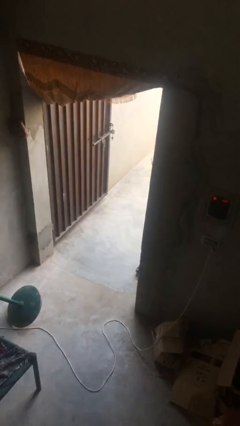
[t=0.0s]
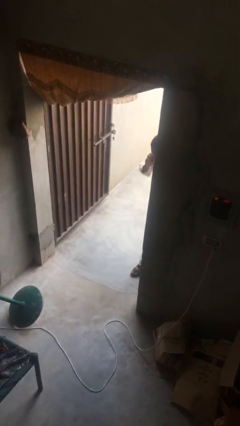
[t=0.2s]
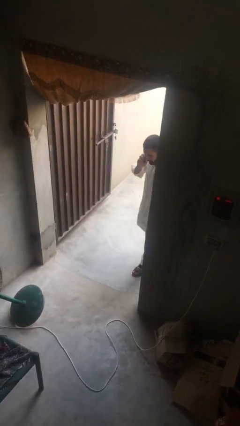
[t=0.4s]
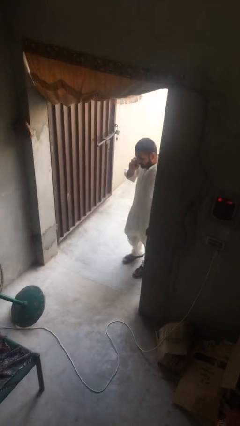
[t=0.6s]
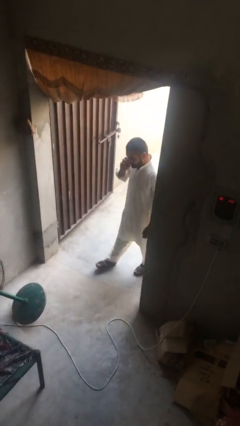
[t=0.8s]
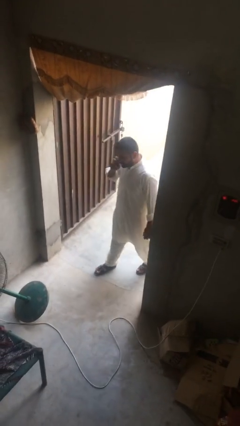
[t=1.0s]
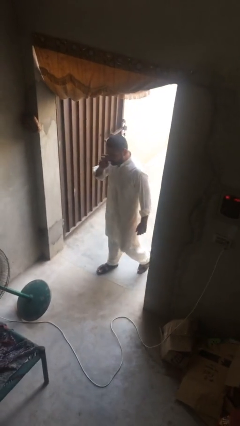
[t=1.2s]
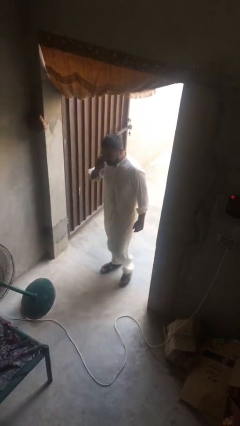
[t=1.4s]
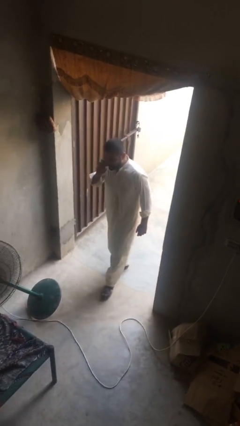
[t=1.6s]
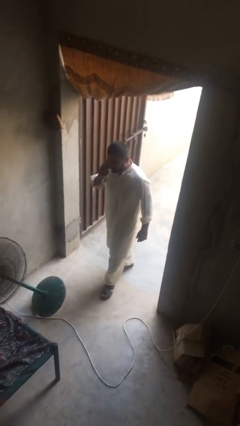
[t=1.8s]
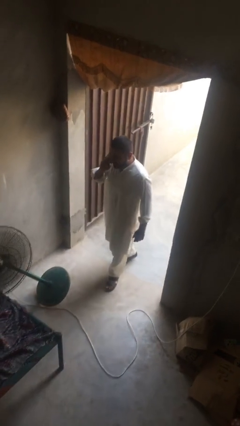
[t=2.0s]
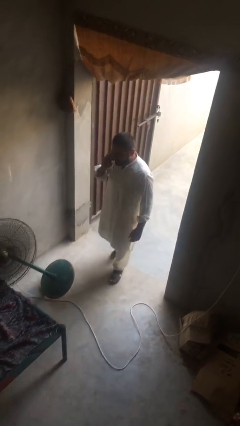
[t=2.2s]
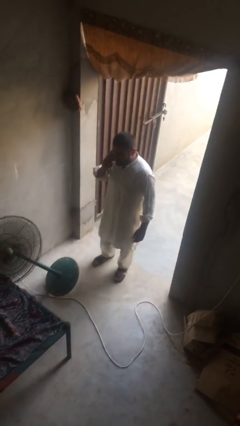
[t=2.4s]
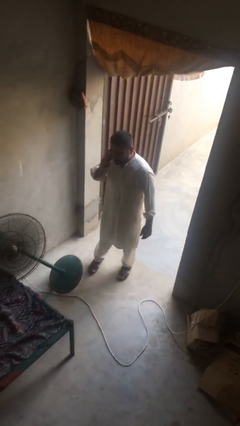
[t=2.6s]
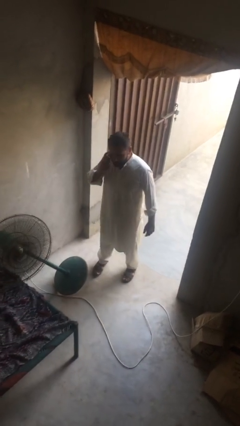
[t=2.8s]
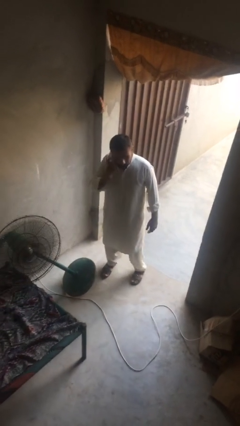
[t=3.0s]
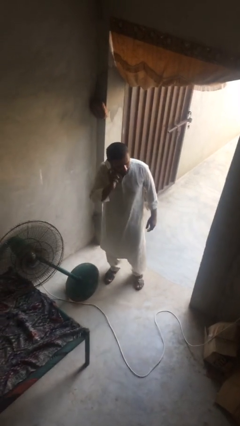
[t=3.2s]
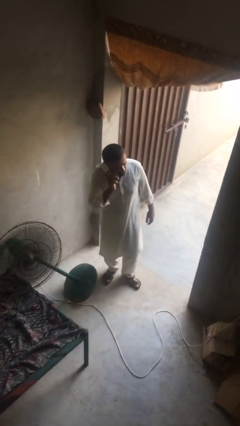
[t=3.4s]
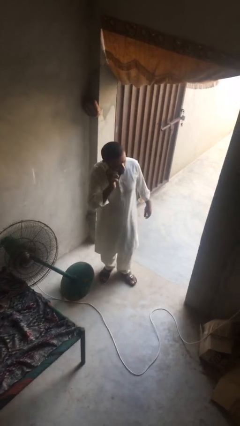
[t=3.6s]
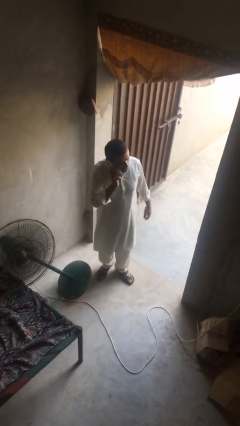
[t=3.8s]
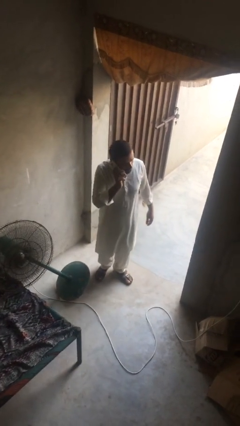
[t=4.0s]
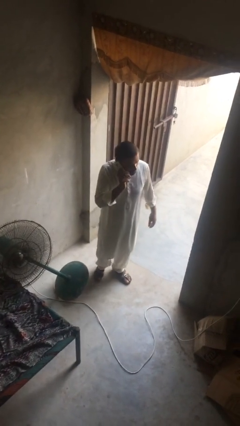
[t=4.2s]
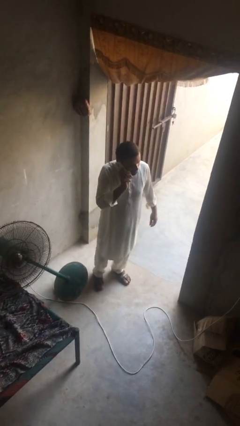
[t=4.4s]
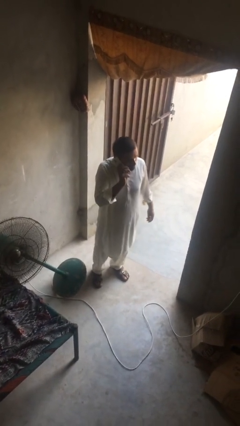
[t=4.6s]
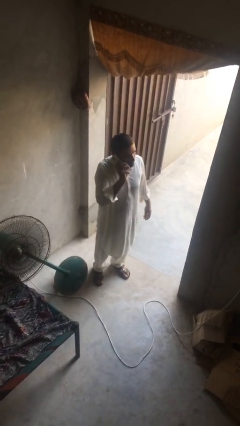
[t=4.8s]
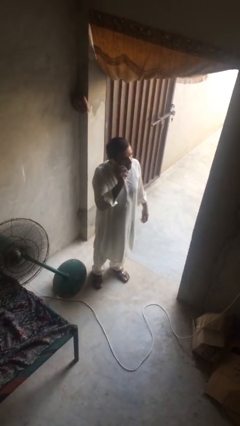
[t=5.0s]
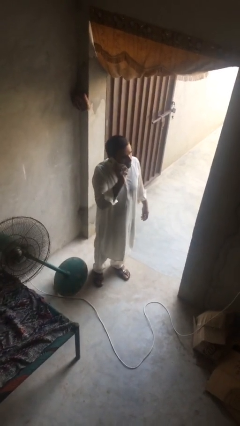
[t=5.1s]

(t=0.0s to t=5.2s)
person enters scene through structure

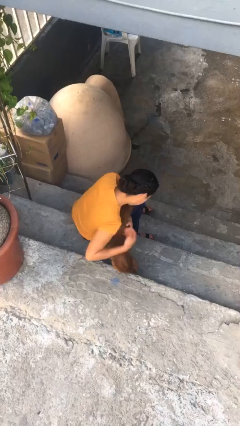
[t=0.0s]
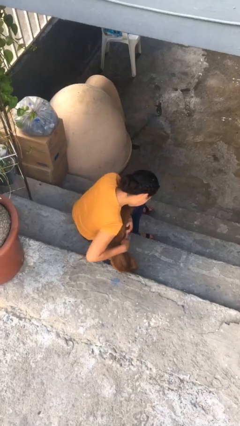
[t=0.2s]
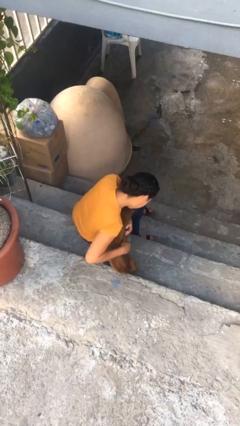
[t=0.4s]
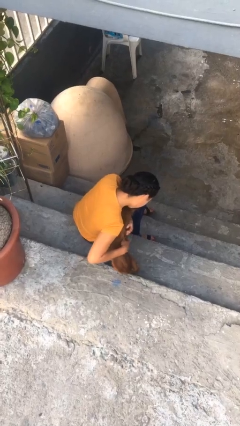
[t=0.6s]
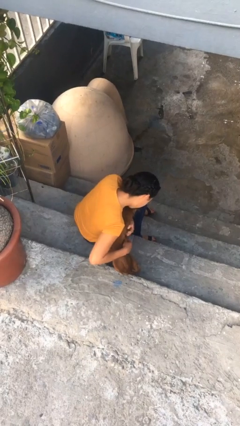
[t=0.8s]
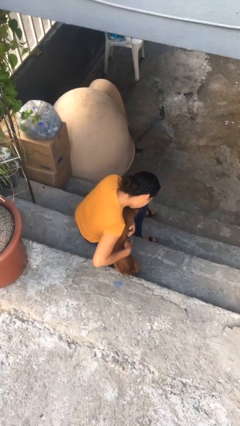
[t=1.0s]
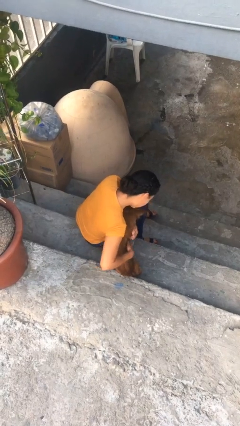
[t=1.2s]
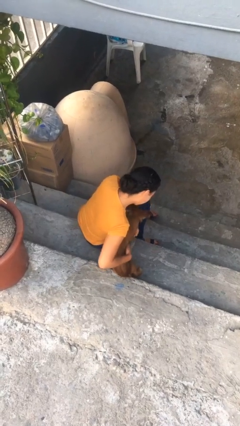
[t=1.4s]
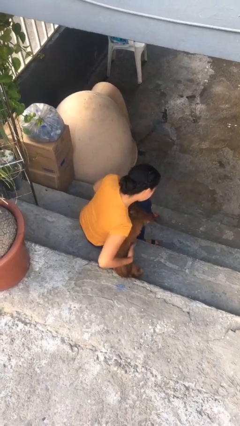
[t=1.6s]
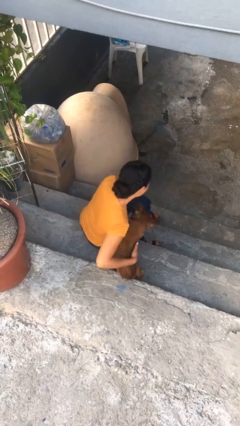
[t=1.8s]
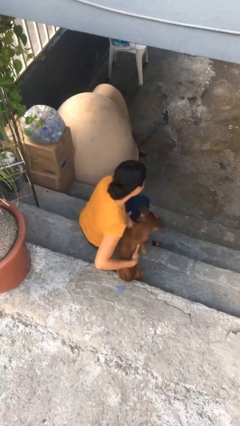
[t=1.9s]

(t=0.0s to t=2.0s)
person hugs dog

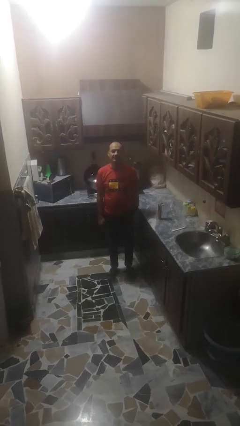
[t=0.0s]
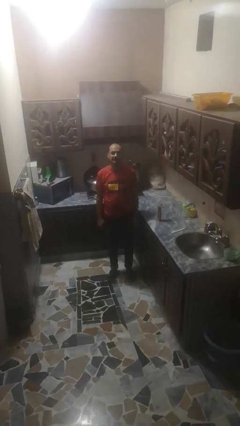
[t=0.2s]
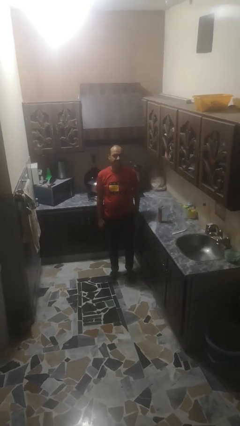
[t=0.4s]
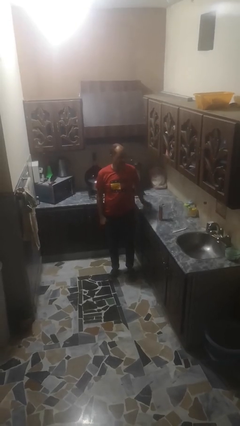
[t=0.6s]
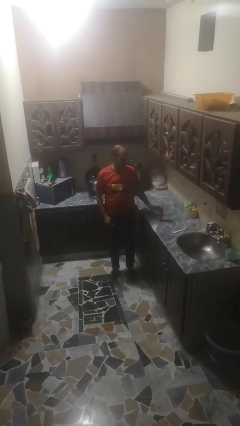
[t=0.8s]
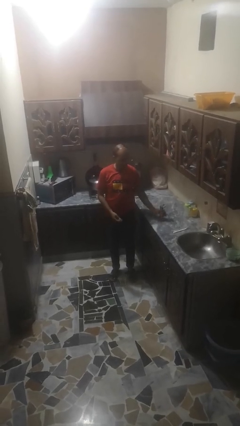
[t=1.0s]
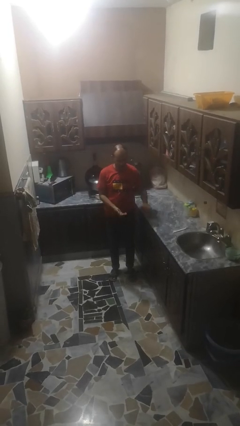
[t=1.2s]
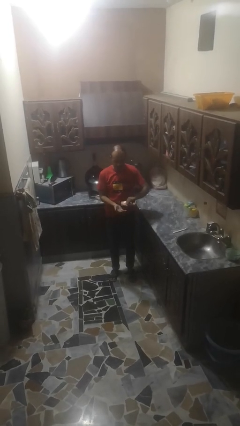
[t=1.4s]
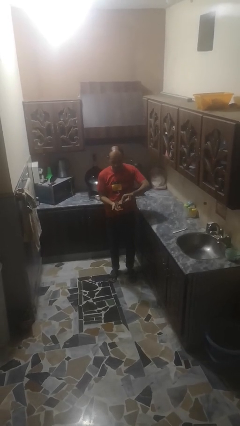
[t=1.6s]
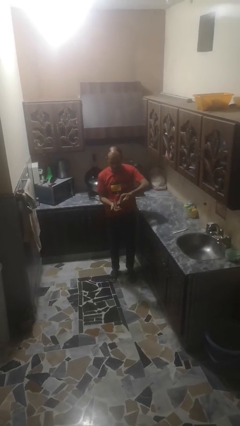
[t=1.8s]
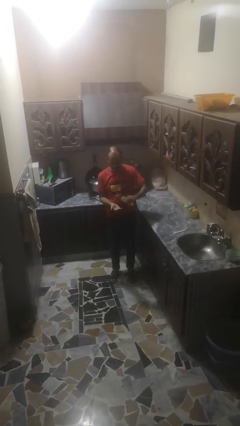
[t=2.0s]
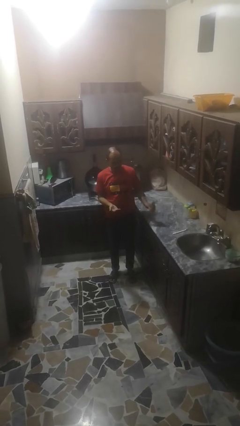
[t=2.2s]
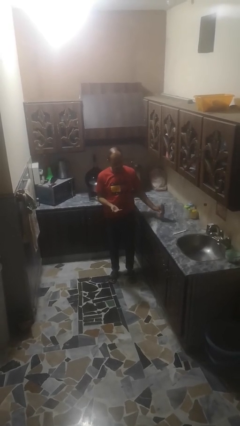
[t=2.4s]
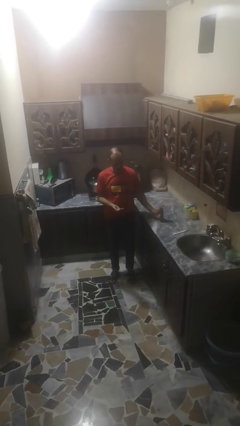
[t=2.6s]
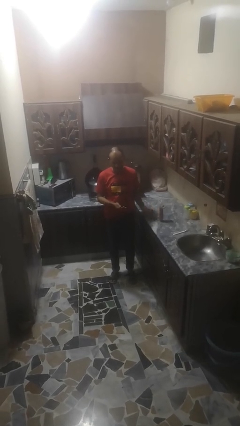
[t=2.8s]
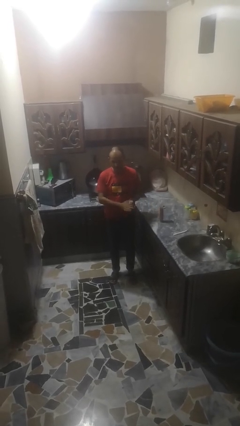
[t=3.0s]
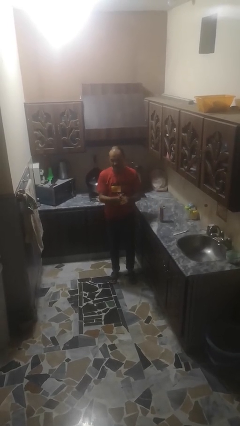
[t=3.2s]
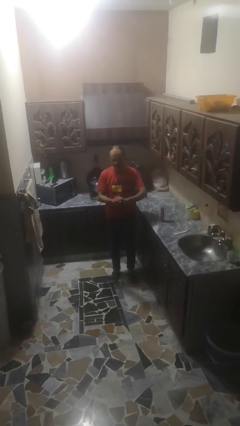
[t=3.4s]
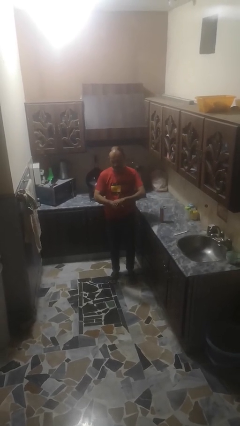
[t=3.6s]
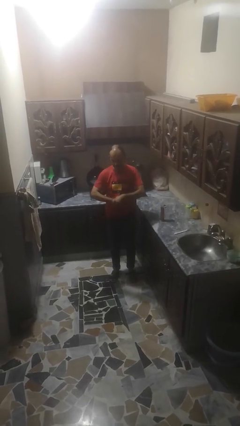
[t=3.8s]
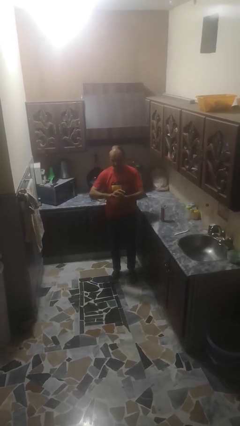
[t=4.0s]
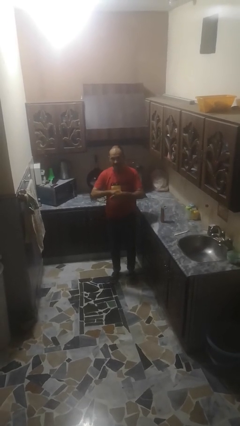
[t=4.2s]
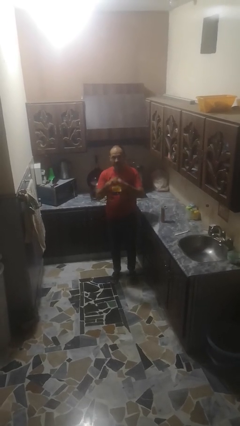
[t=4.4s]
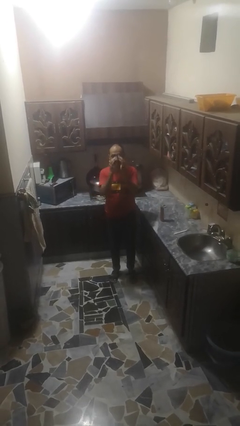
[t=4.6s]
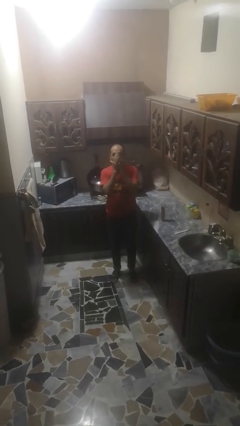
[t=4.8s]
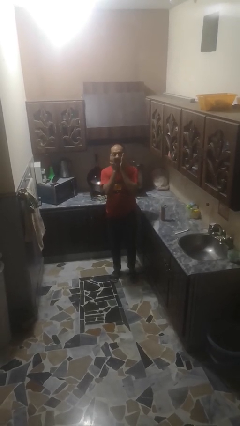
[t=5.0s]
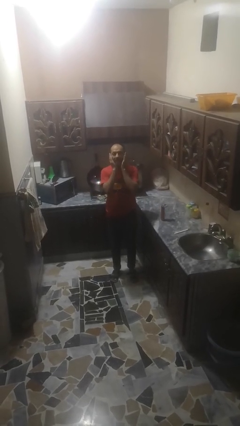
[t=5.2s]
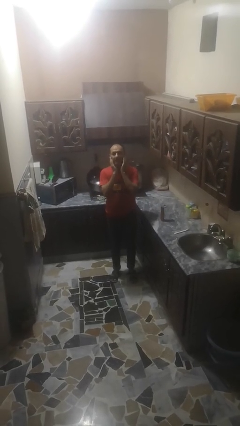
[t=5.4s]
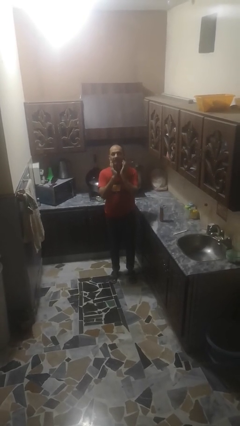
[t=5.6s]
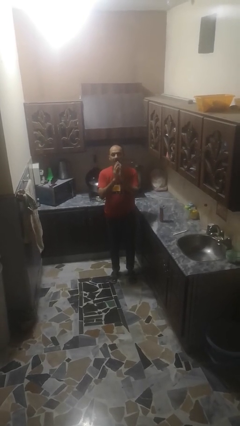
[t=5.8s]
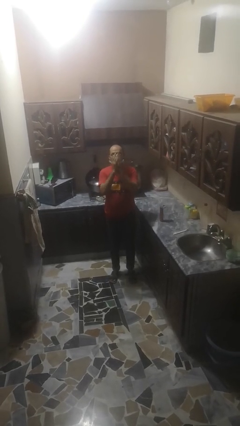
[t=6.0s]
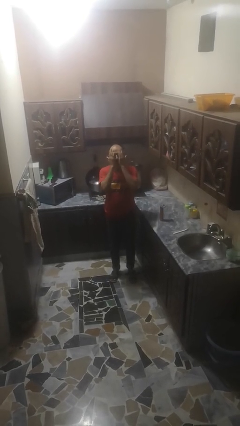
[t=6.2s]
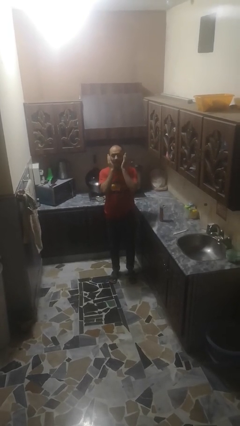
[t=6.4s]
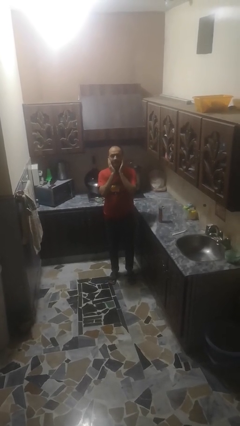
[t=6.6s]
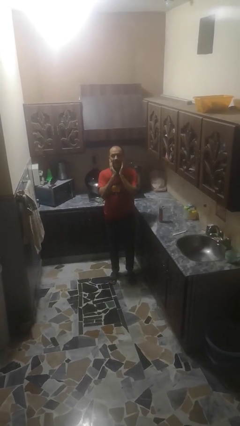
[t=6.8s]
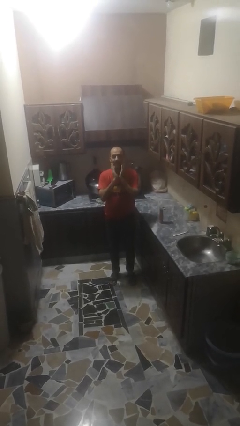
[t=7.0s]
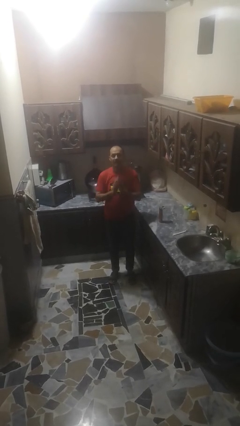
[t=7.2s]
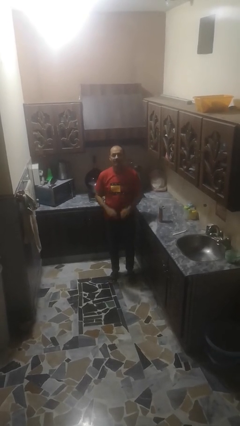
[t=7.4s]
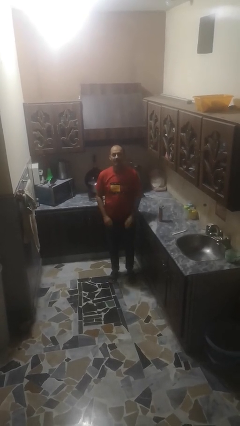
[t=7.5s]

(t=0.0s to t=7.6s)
person applies sunscreen

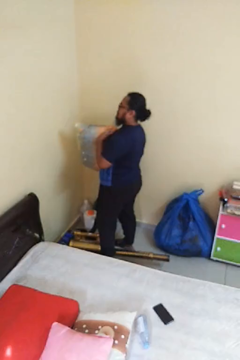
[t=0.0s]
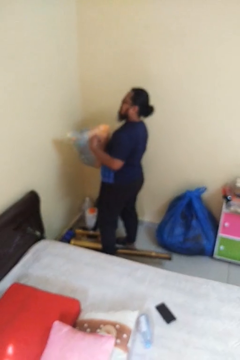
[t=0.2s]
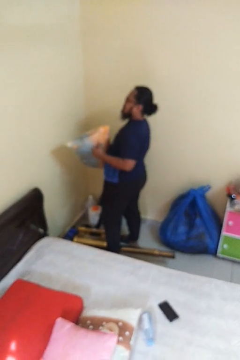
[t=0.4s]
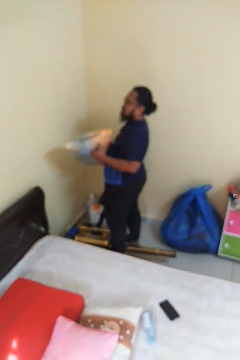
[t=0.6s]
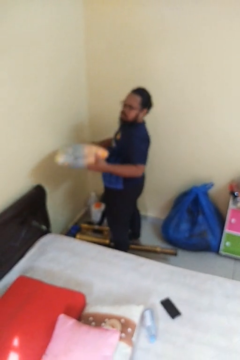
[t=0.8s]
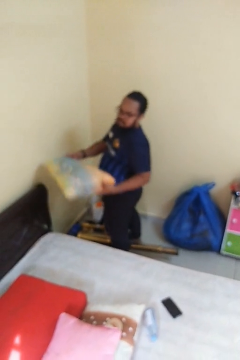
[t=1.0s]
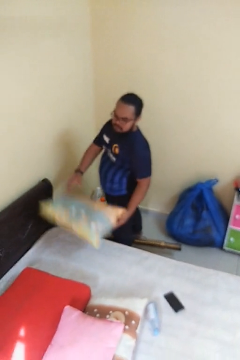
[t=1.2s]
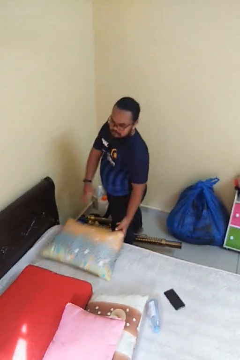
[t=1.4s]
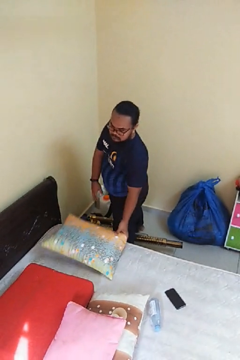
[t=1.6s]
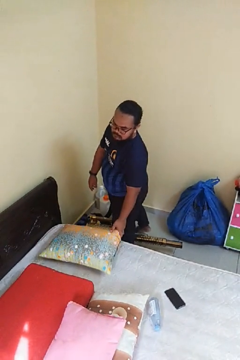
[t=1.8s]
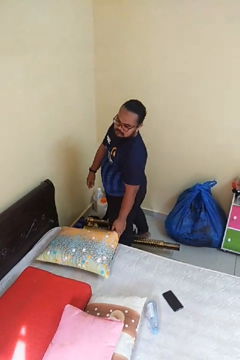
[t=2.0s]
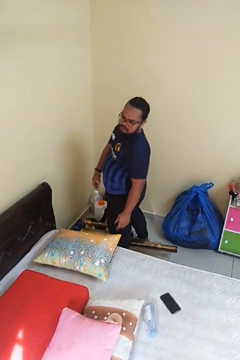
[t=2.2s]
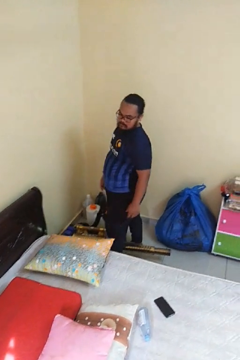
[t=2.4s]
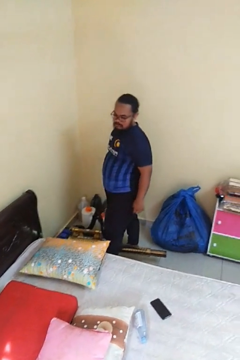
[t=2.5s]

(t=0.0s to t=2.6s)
person puts down object on bed

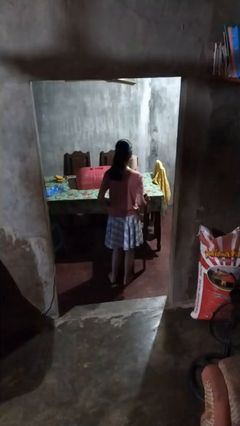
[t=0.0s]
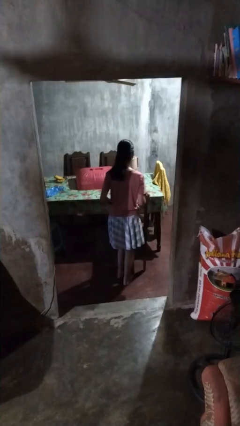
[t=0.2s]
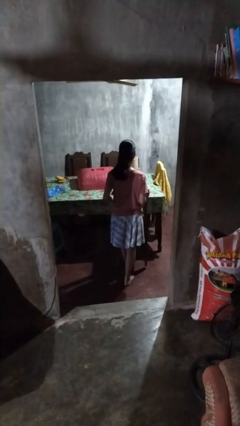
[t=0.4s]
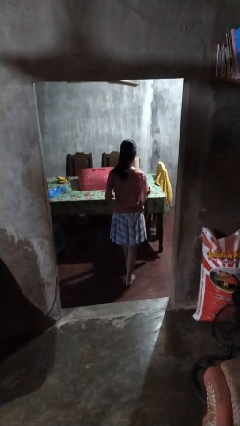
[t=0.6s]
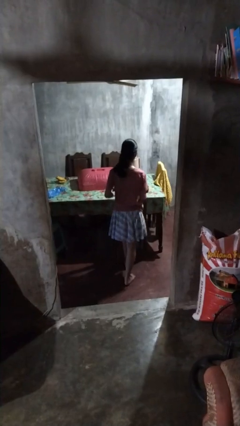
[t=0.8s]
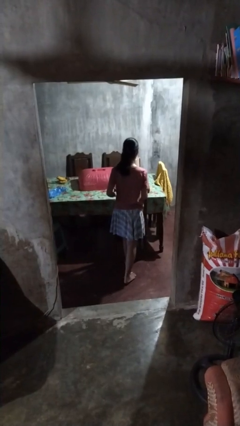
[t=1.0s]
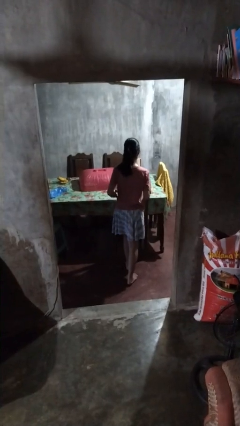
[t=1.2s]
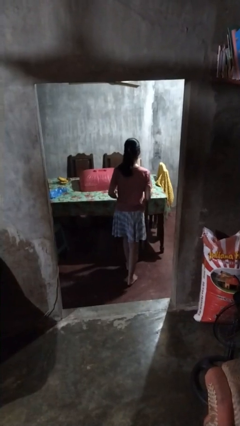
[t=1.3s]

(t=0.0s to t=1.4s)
person pushes in chair
